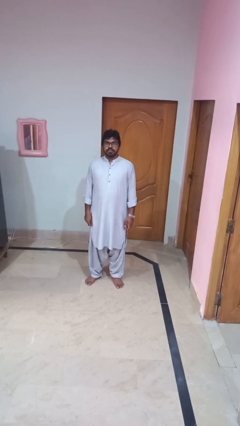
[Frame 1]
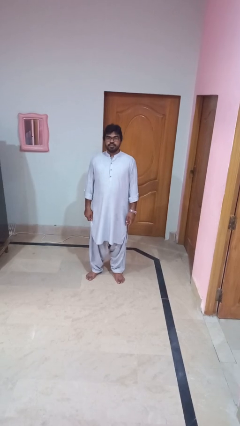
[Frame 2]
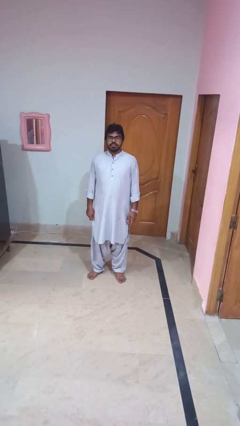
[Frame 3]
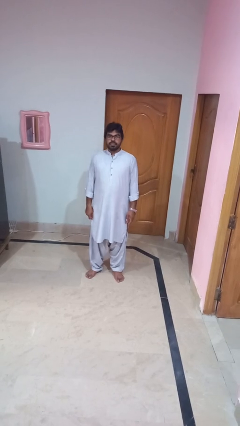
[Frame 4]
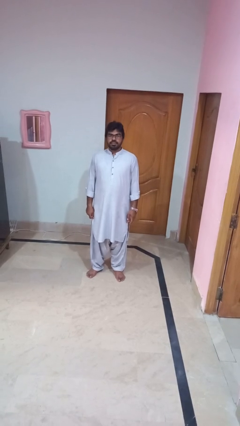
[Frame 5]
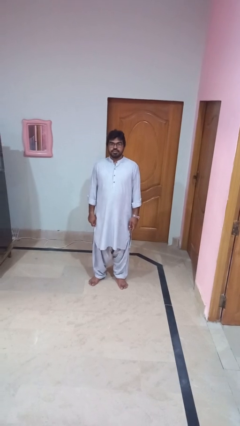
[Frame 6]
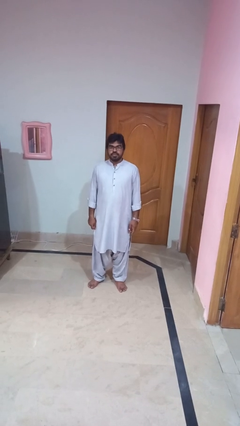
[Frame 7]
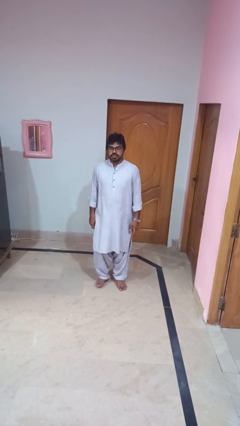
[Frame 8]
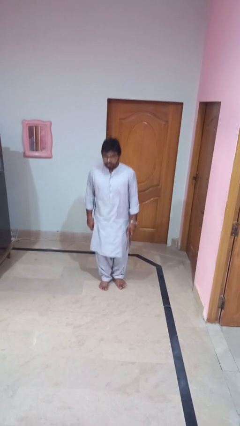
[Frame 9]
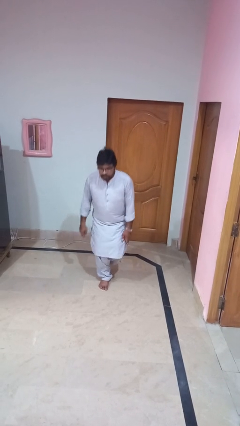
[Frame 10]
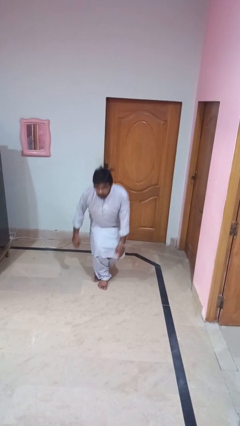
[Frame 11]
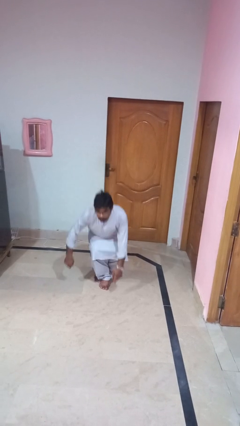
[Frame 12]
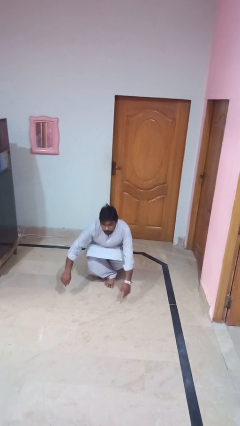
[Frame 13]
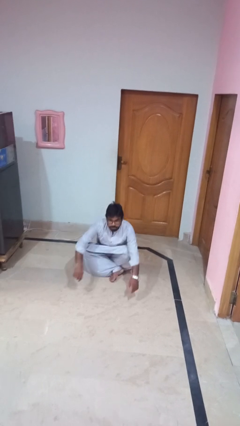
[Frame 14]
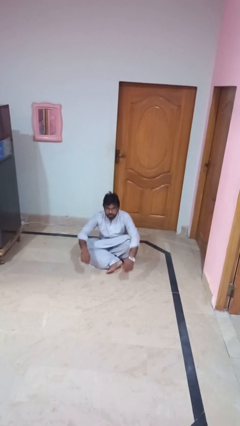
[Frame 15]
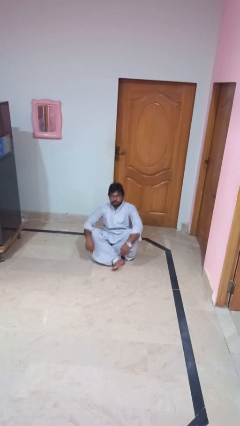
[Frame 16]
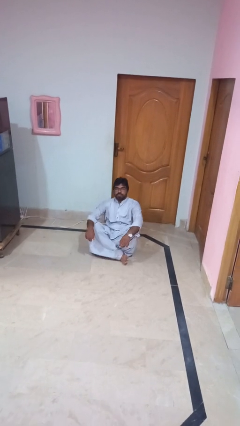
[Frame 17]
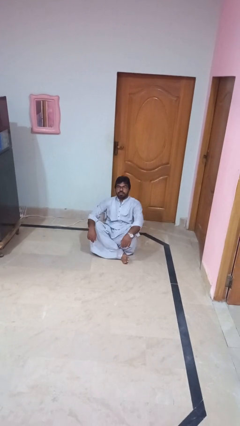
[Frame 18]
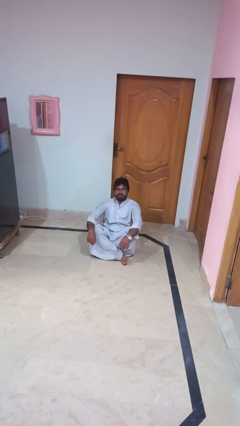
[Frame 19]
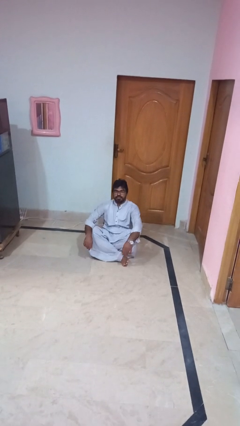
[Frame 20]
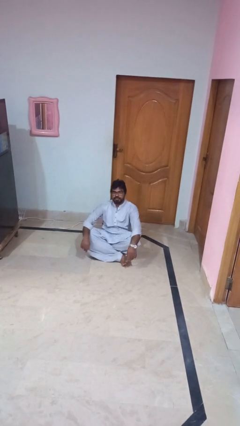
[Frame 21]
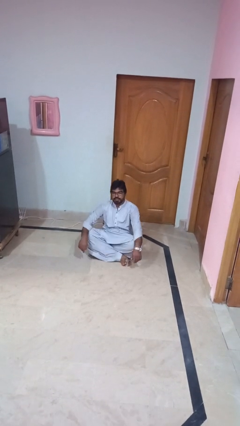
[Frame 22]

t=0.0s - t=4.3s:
person sits crisscross

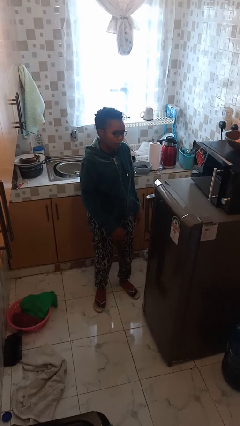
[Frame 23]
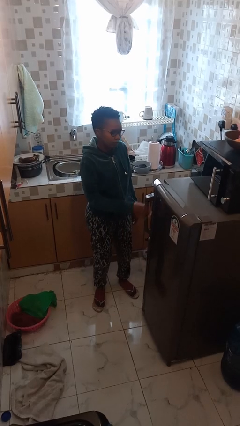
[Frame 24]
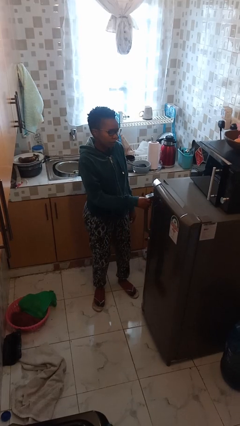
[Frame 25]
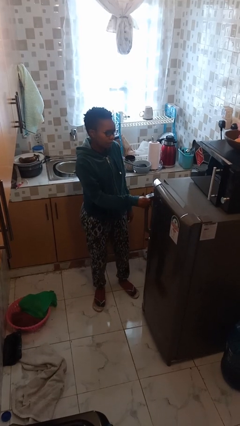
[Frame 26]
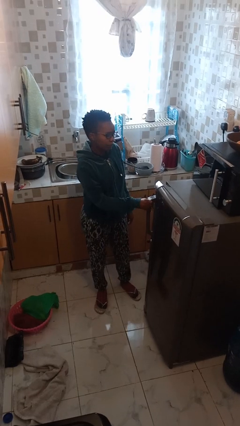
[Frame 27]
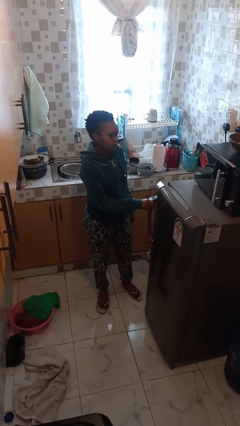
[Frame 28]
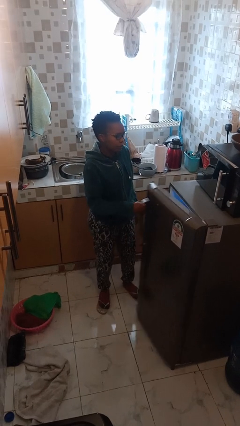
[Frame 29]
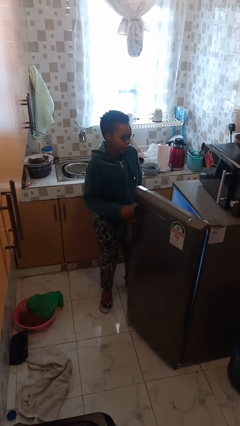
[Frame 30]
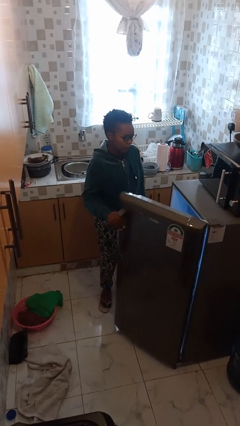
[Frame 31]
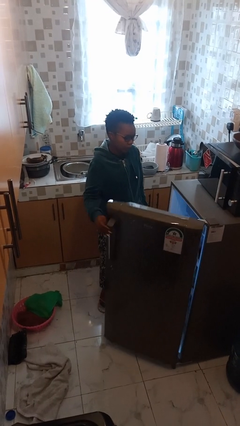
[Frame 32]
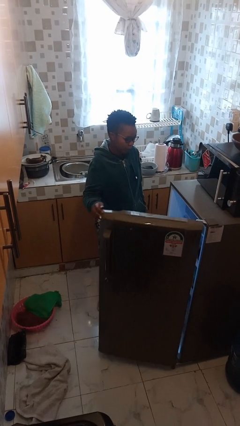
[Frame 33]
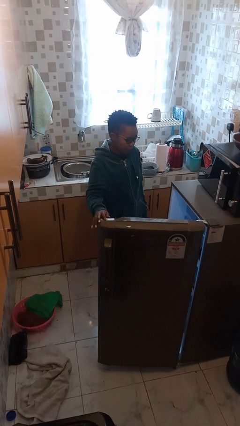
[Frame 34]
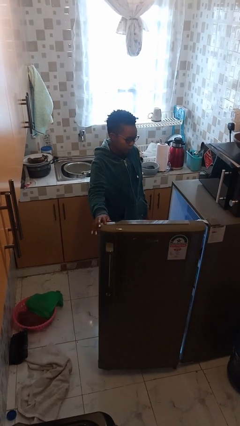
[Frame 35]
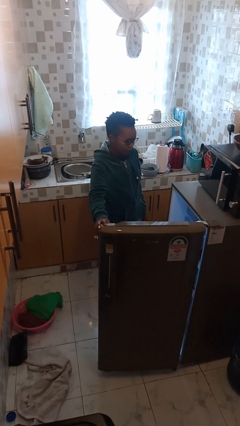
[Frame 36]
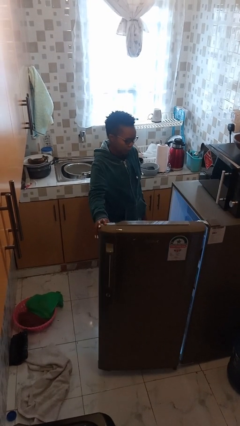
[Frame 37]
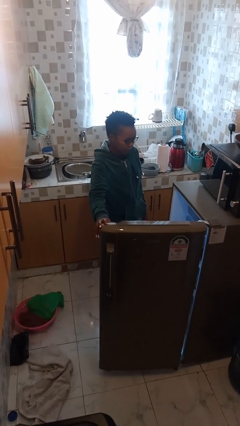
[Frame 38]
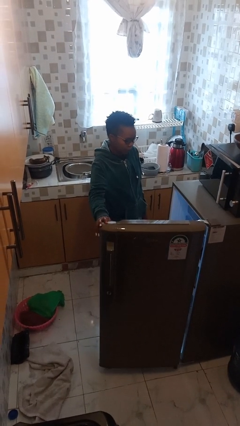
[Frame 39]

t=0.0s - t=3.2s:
person opens refrigerator

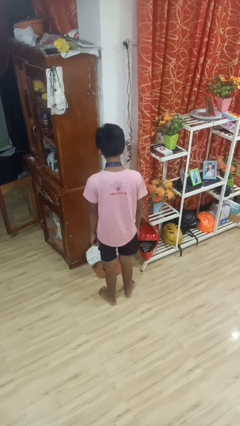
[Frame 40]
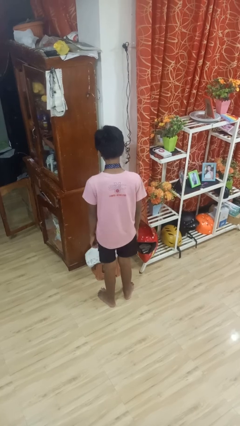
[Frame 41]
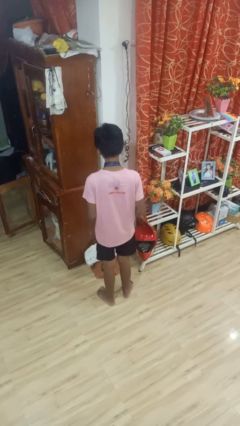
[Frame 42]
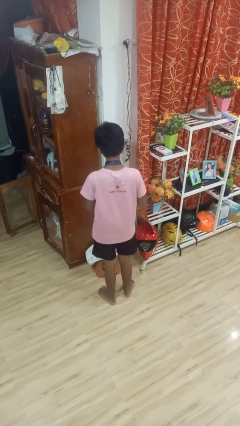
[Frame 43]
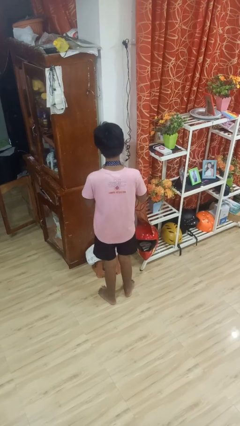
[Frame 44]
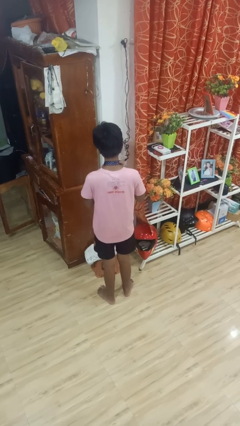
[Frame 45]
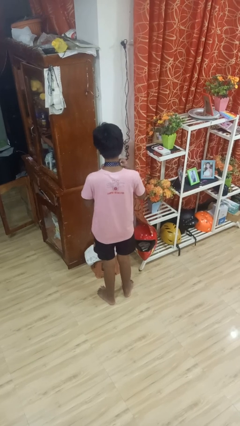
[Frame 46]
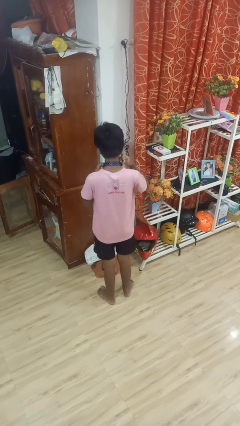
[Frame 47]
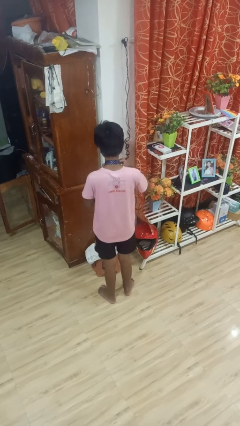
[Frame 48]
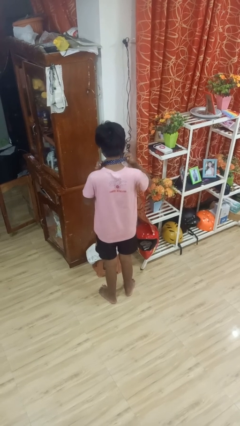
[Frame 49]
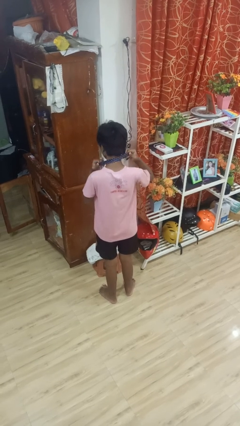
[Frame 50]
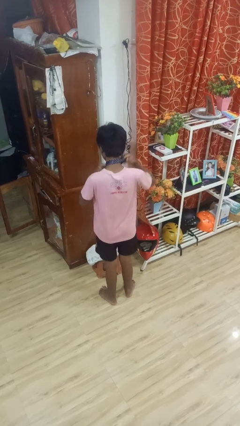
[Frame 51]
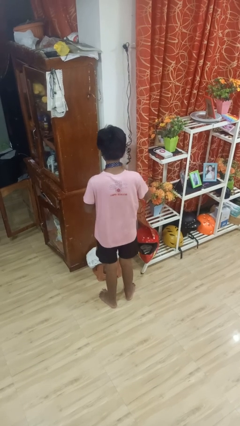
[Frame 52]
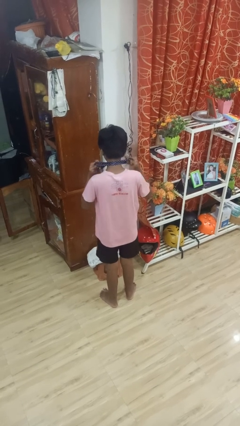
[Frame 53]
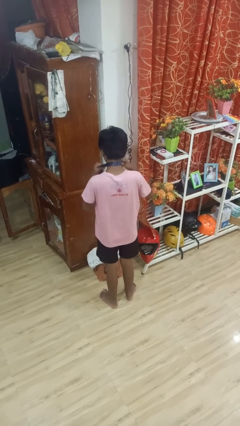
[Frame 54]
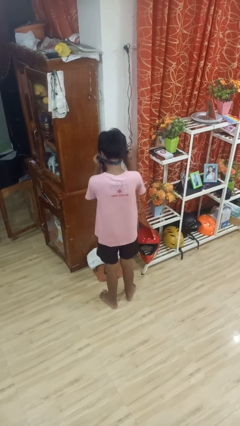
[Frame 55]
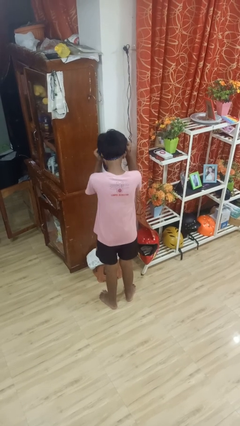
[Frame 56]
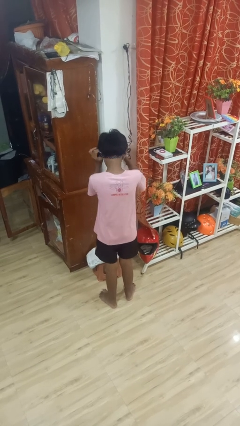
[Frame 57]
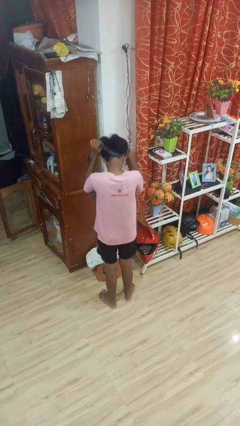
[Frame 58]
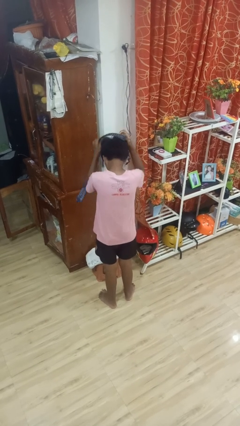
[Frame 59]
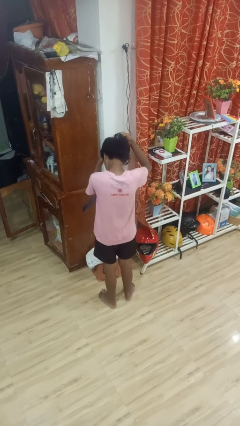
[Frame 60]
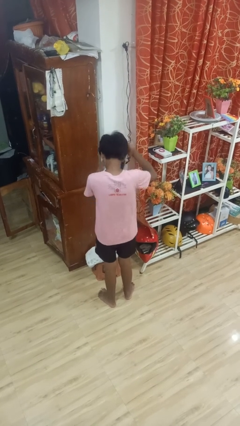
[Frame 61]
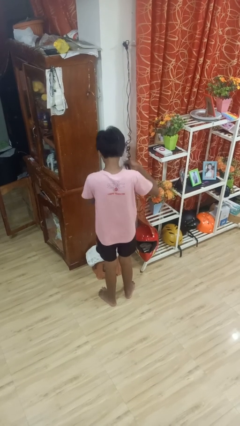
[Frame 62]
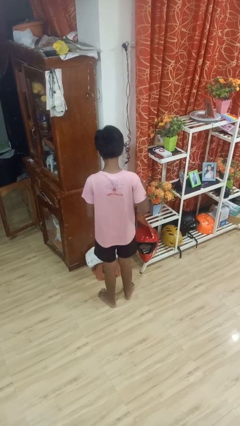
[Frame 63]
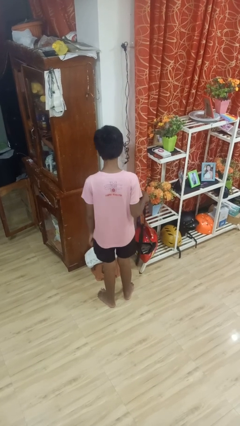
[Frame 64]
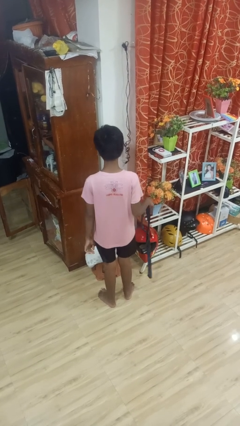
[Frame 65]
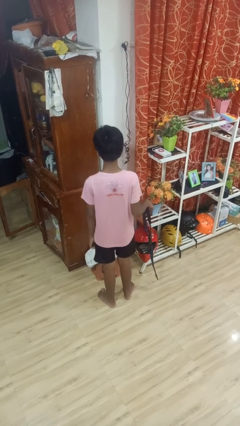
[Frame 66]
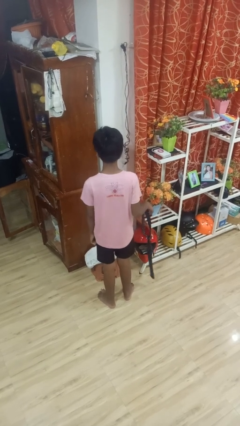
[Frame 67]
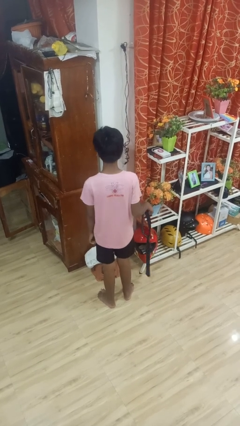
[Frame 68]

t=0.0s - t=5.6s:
person takes off necktie

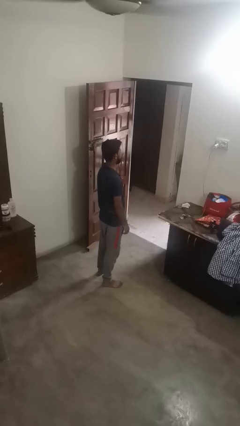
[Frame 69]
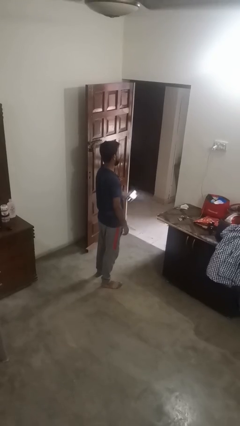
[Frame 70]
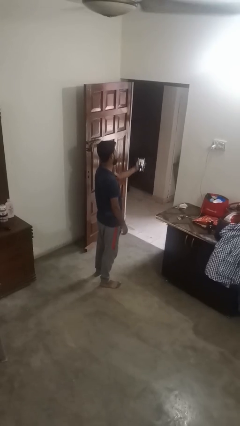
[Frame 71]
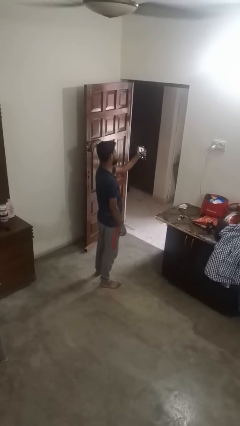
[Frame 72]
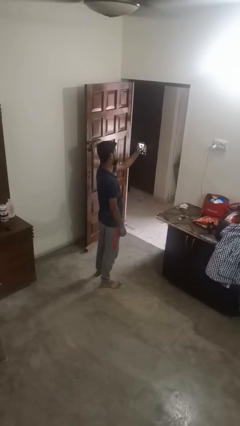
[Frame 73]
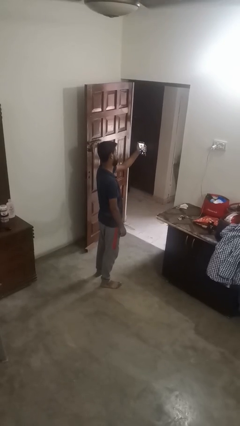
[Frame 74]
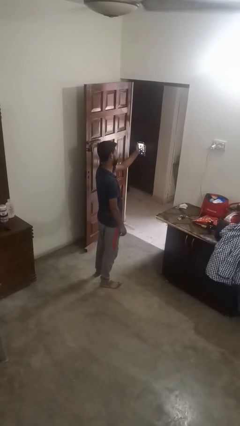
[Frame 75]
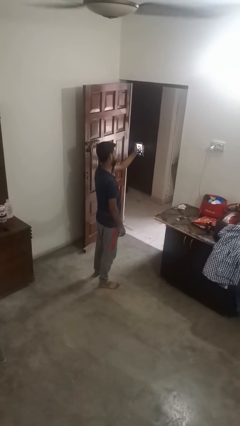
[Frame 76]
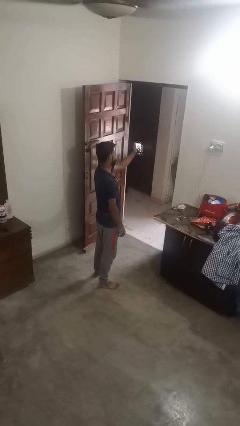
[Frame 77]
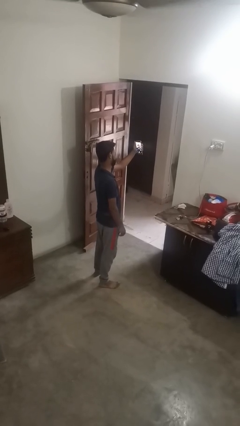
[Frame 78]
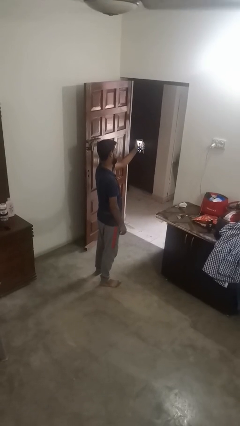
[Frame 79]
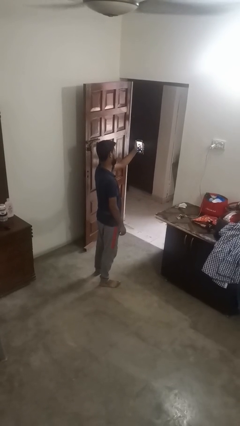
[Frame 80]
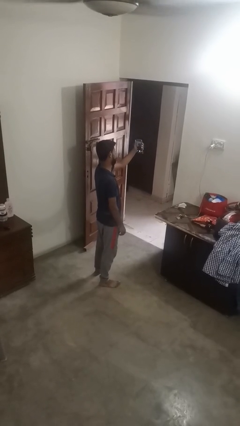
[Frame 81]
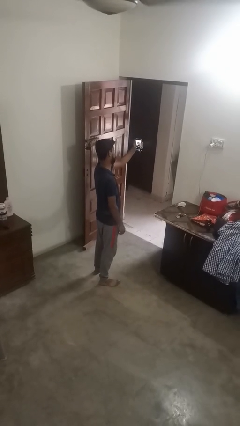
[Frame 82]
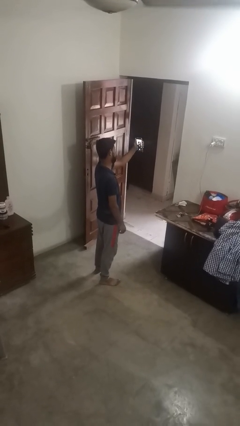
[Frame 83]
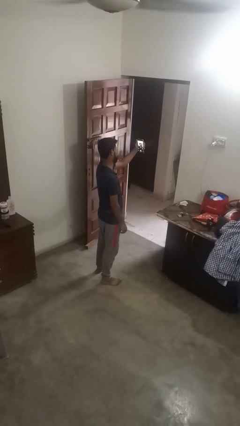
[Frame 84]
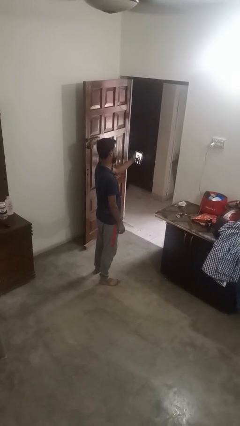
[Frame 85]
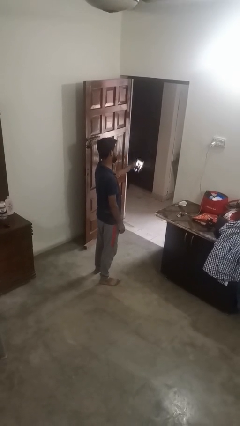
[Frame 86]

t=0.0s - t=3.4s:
person takes selfie

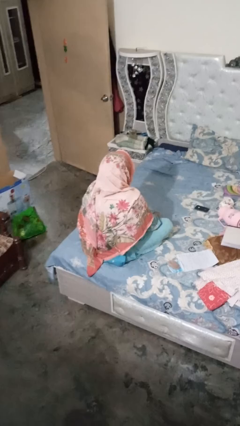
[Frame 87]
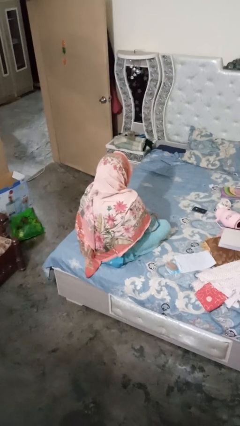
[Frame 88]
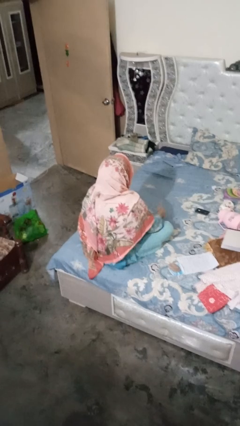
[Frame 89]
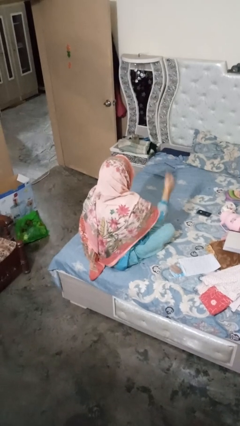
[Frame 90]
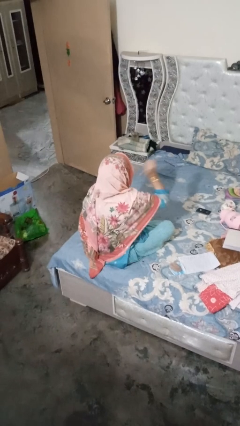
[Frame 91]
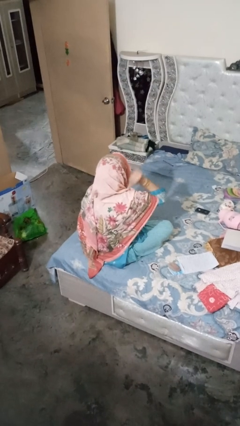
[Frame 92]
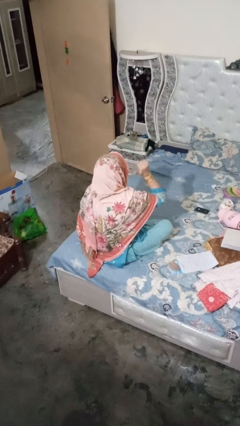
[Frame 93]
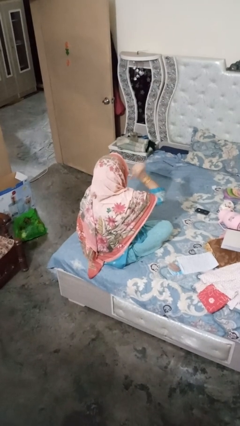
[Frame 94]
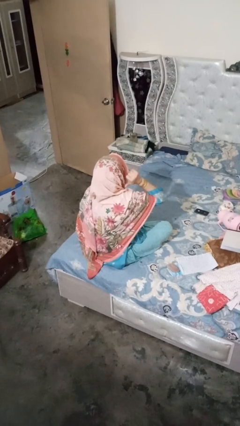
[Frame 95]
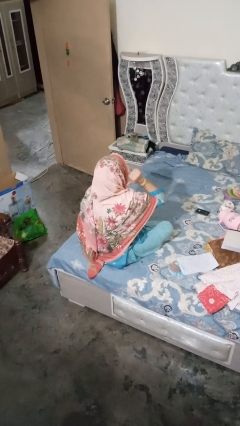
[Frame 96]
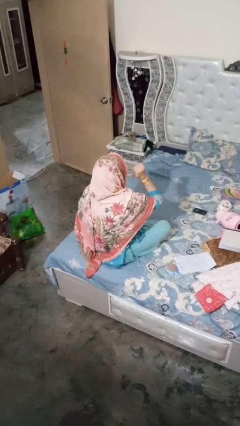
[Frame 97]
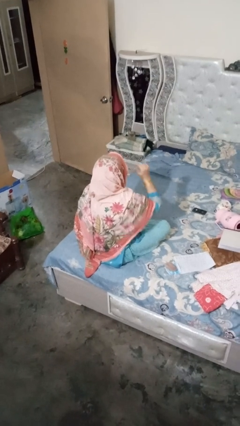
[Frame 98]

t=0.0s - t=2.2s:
person gestures behind me
